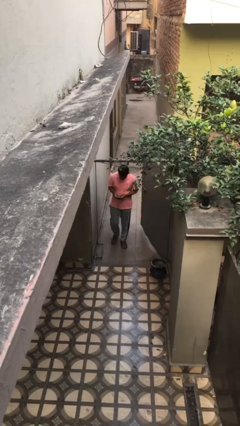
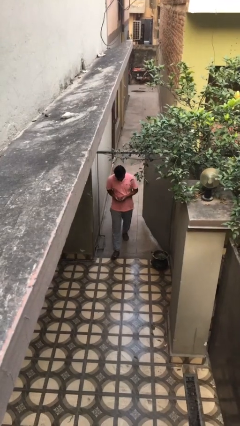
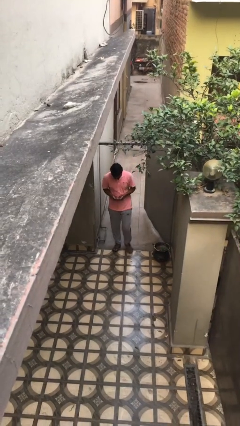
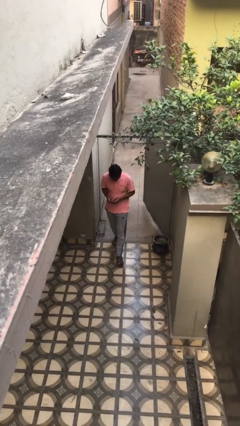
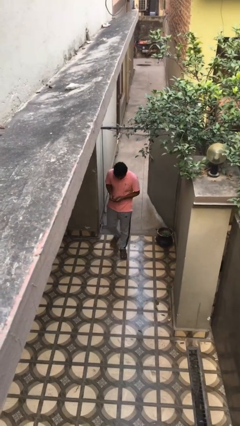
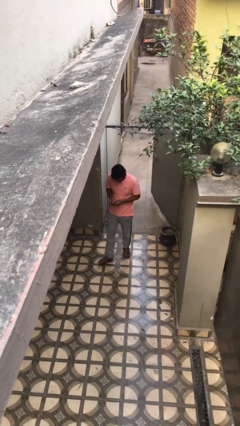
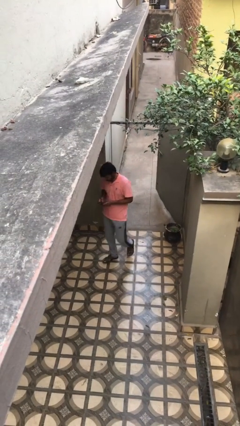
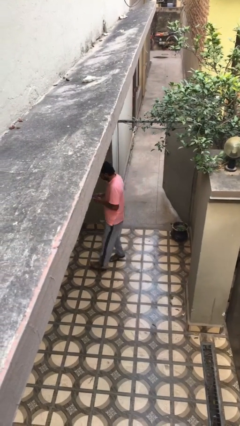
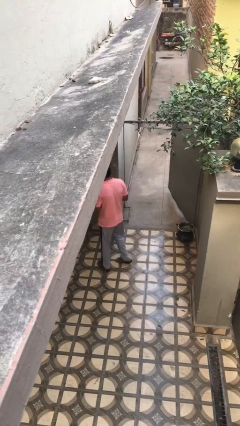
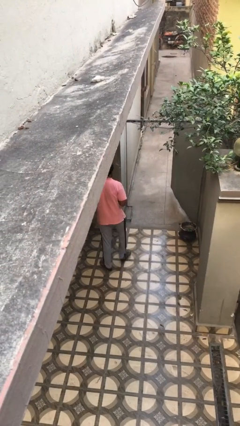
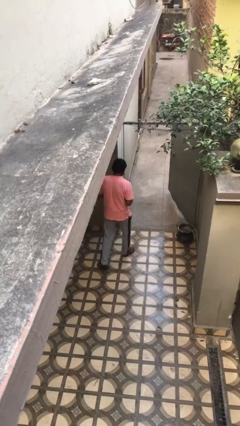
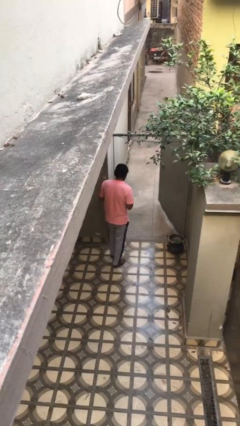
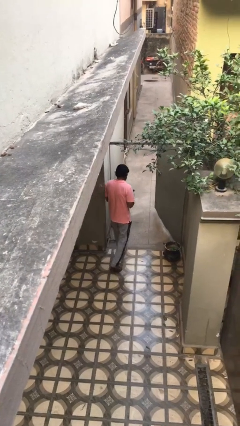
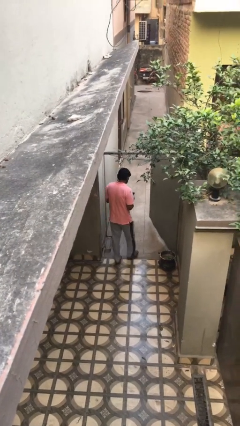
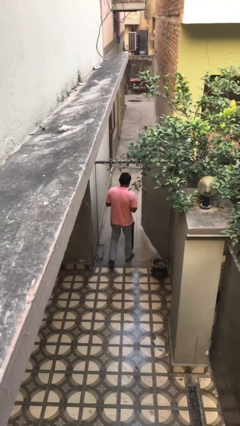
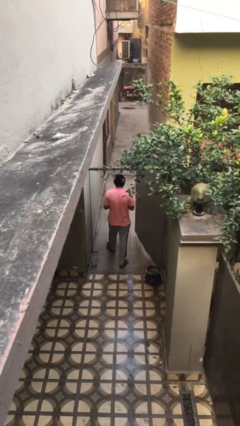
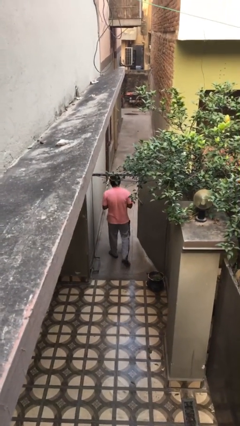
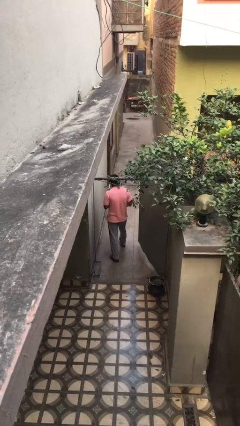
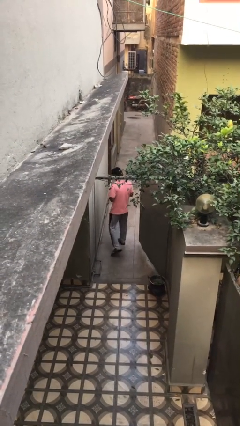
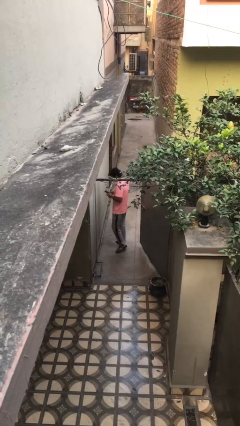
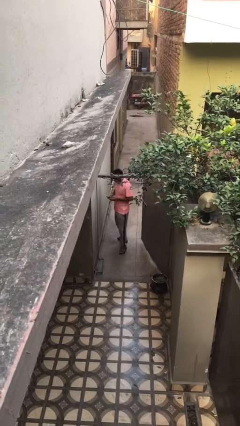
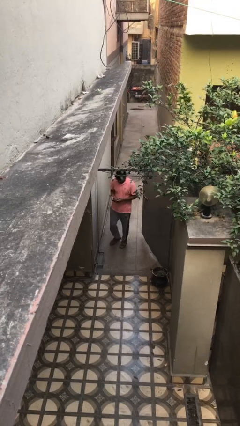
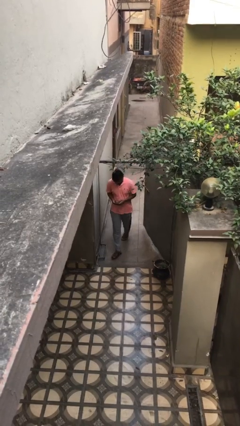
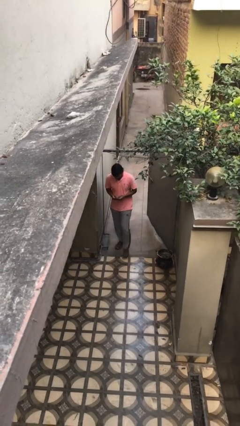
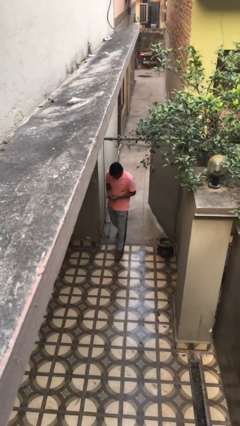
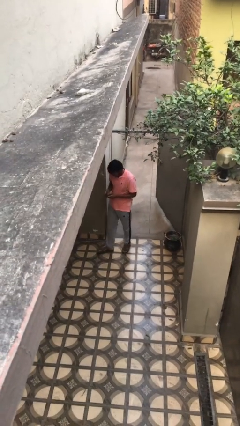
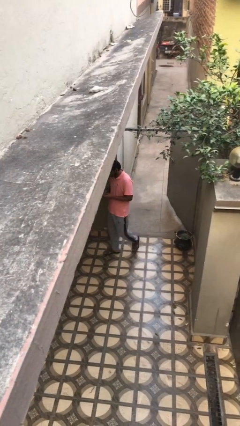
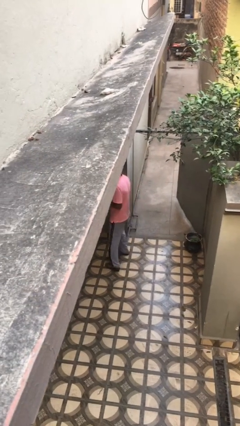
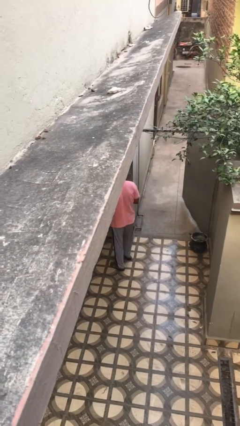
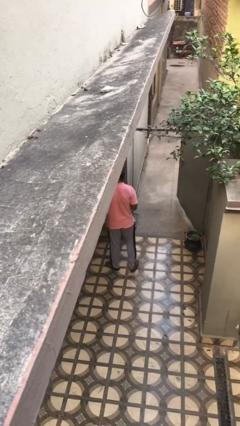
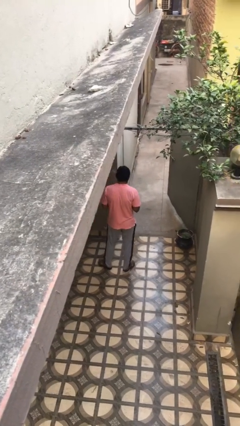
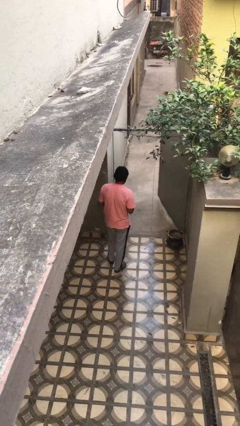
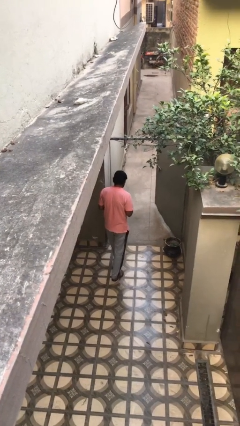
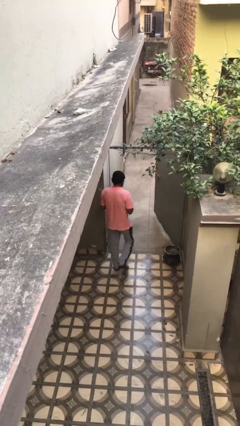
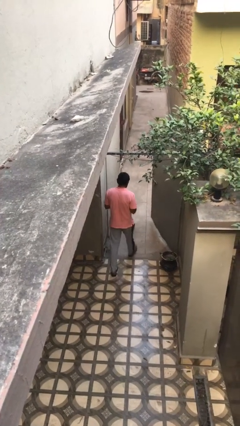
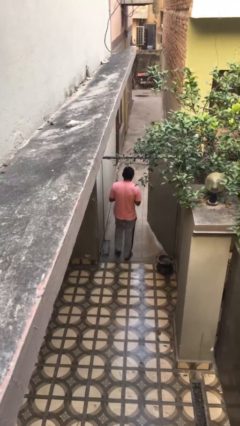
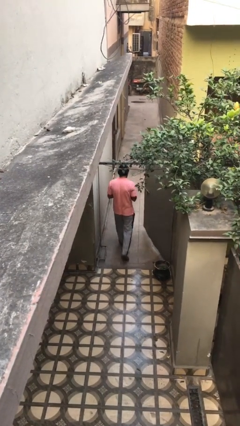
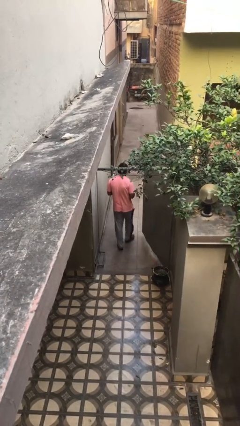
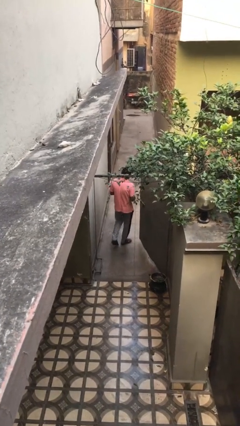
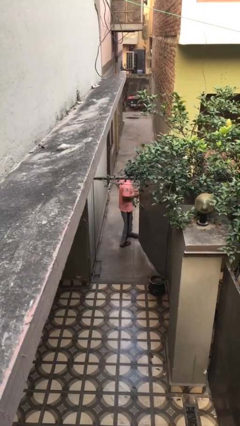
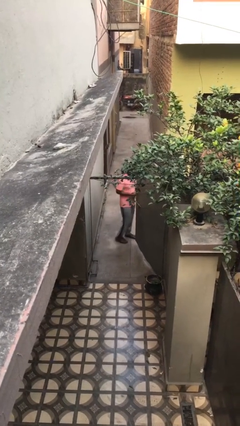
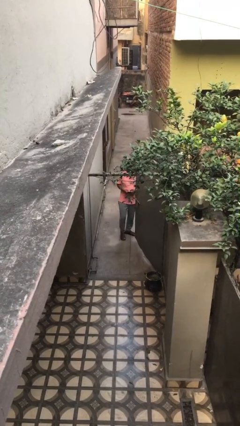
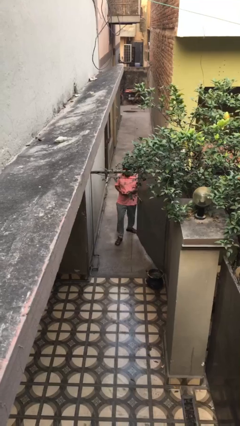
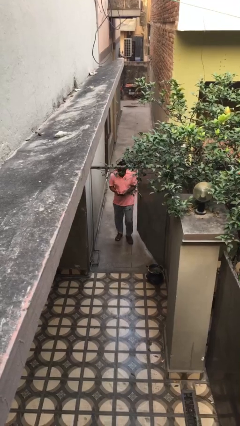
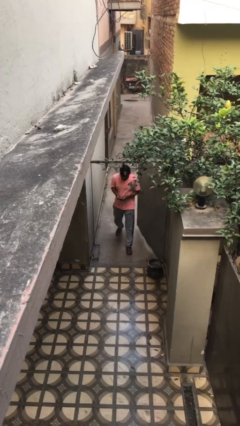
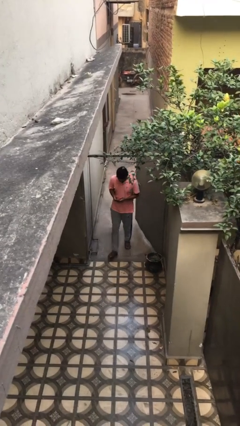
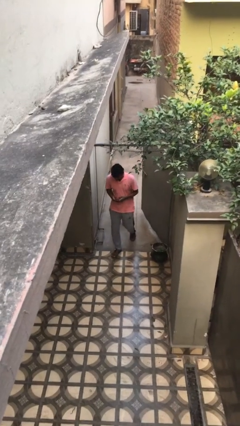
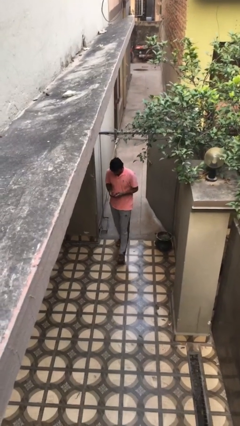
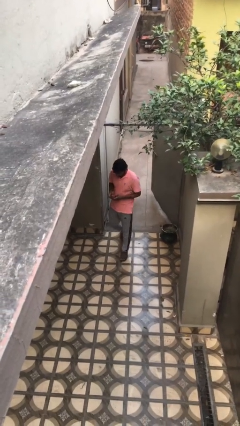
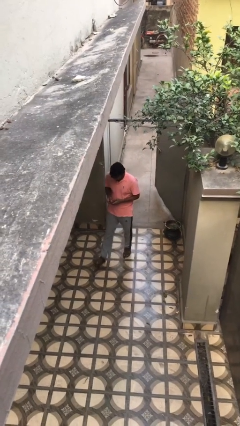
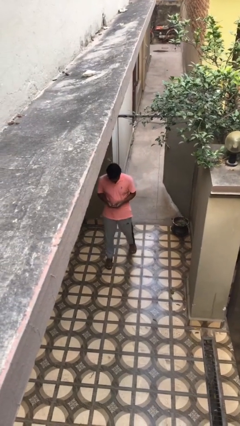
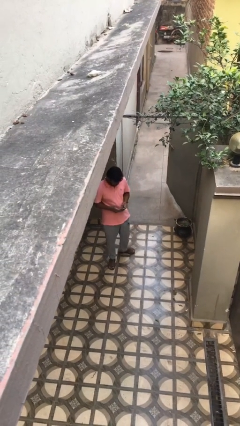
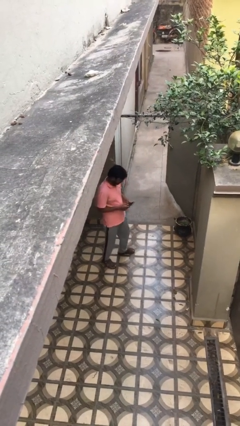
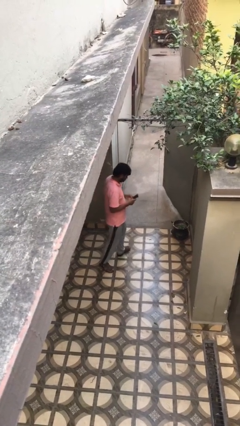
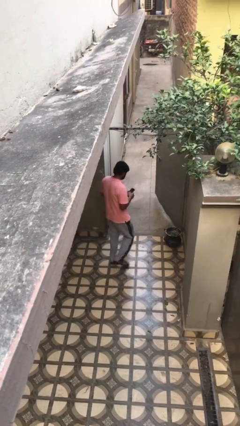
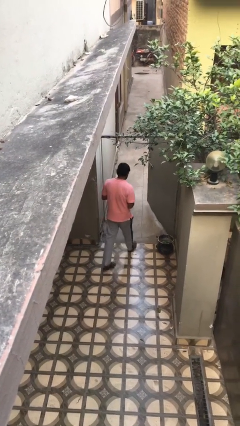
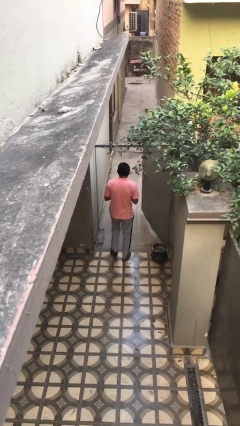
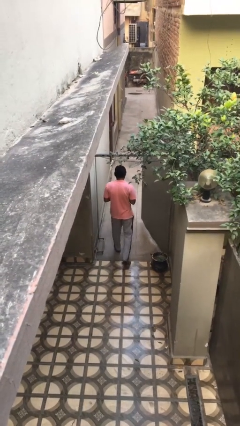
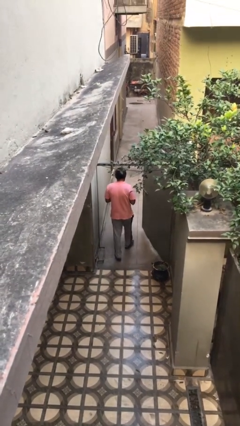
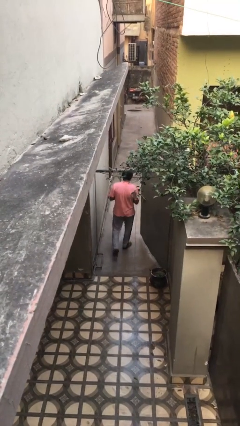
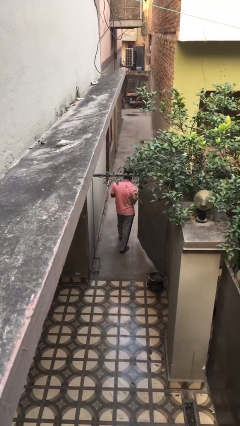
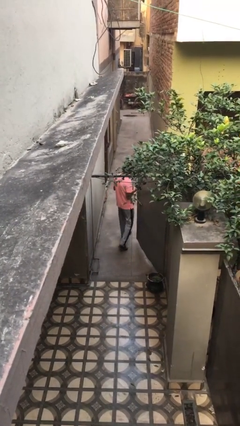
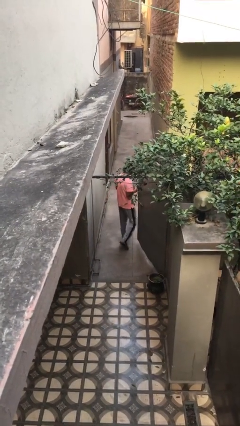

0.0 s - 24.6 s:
person texts on phone

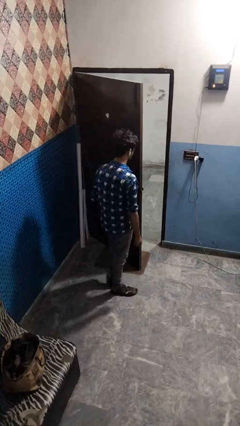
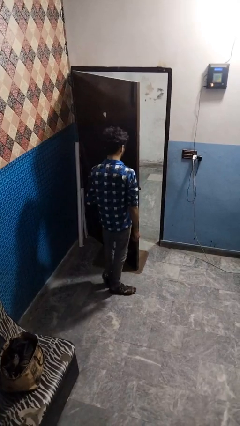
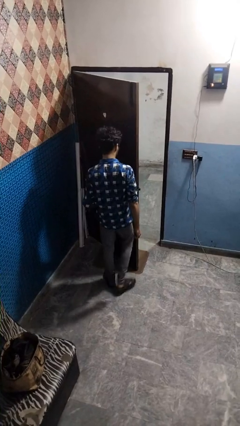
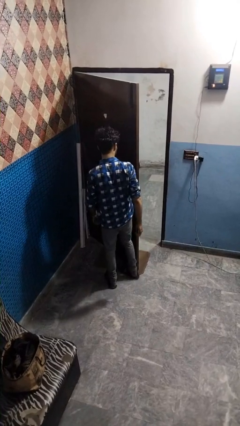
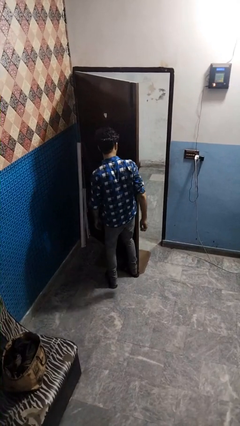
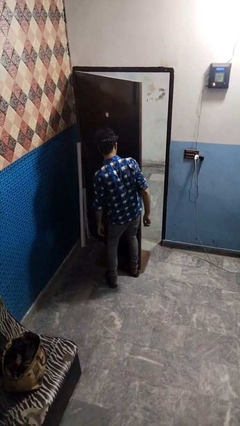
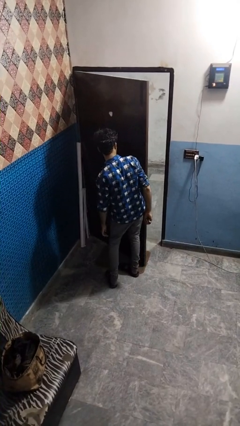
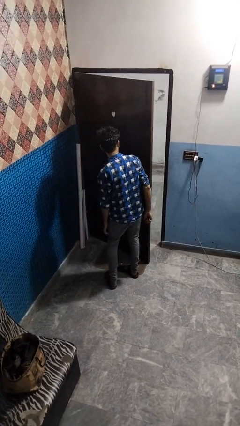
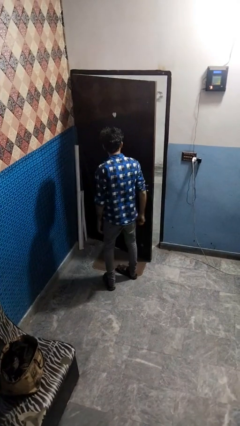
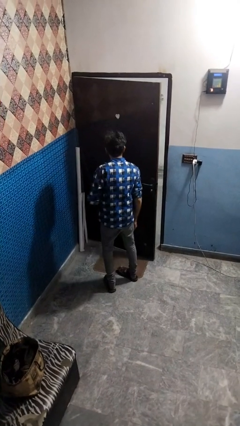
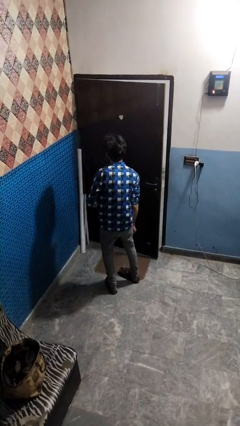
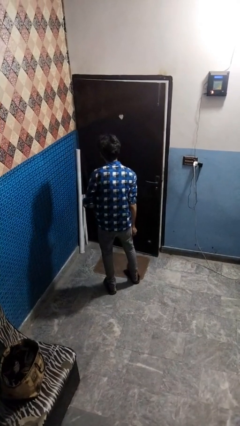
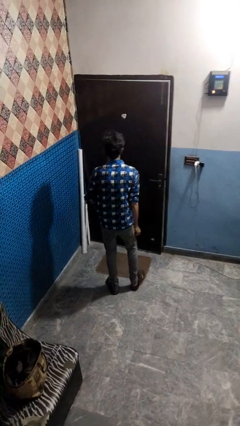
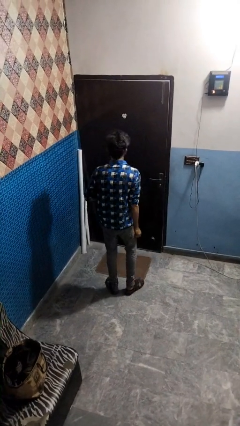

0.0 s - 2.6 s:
person closes door with hip

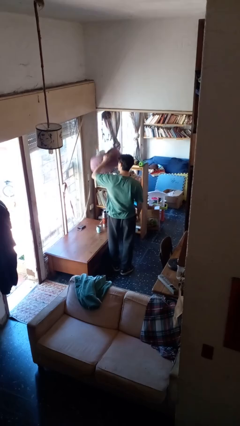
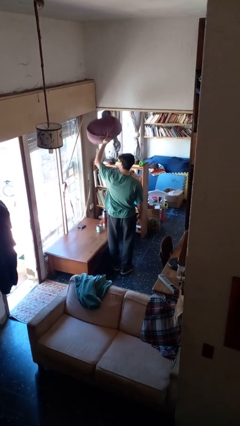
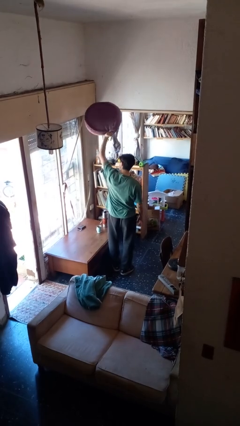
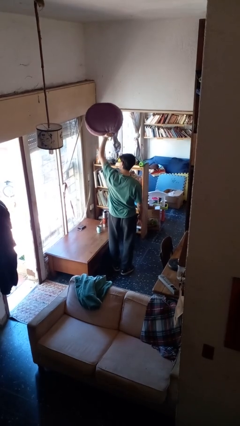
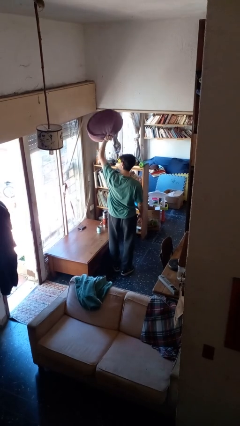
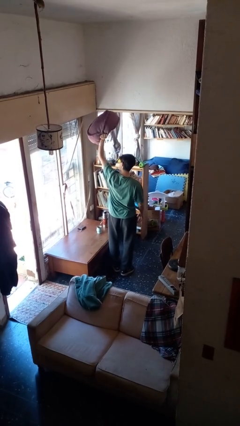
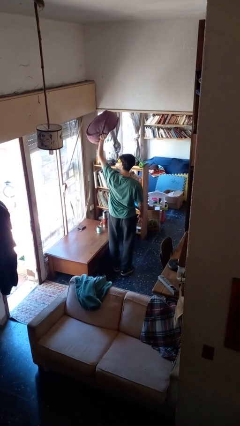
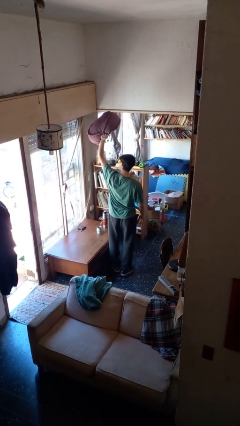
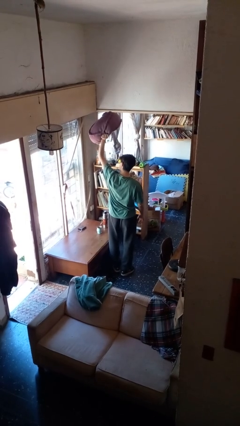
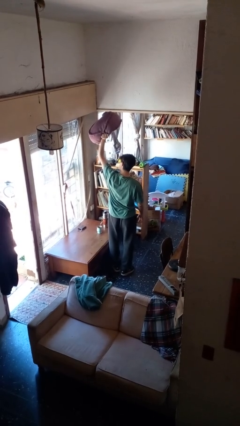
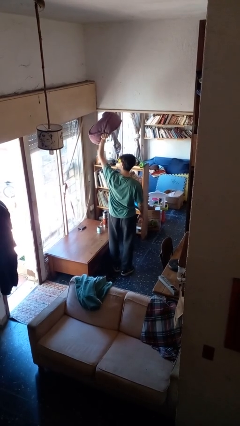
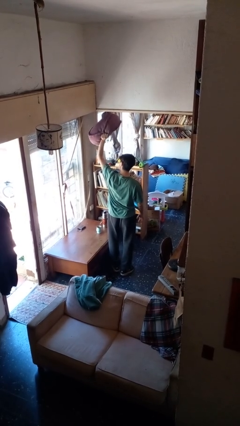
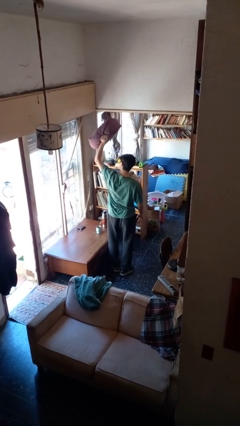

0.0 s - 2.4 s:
person holds object above head

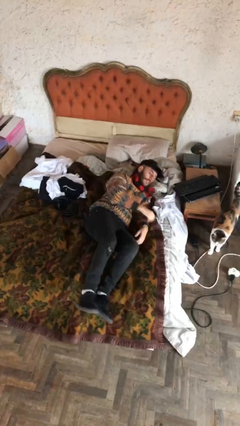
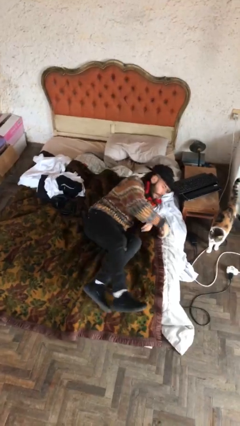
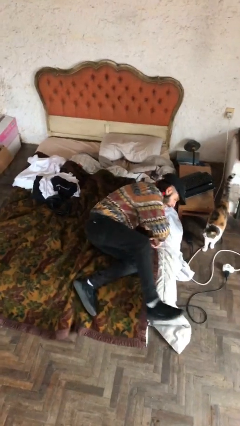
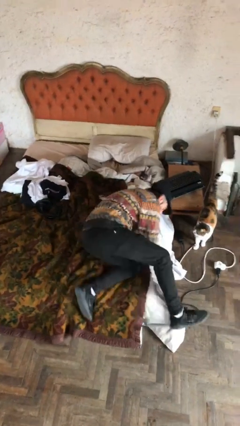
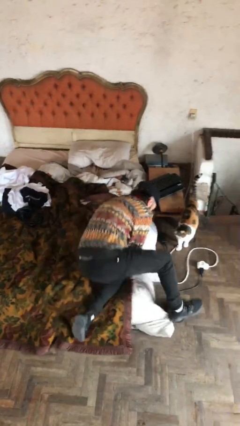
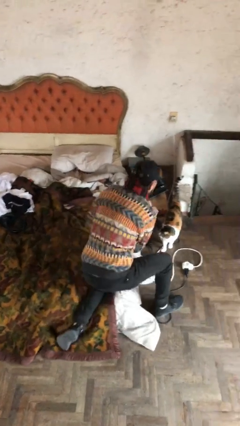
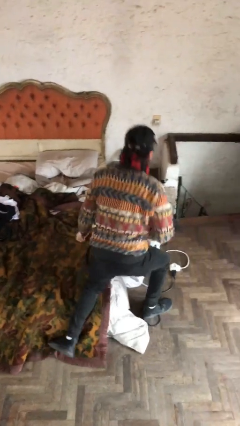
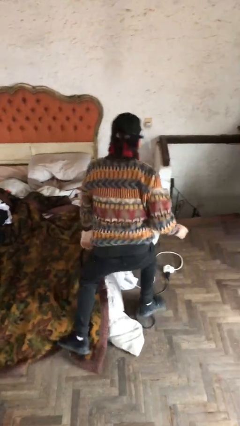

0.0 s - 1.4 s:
person stands up
